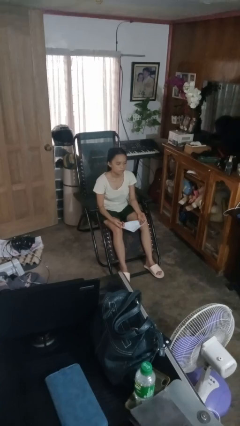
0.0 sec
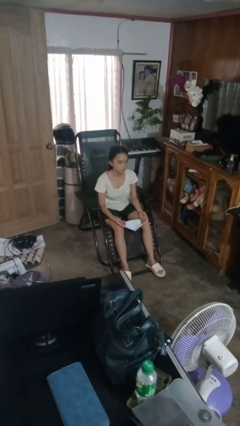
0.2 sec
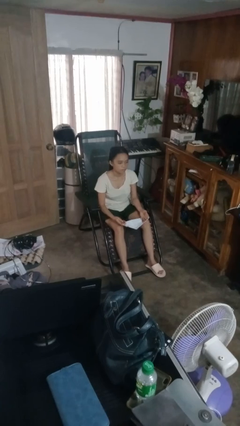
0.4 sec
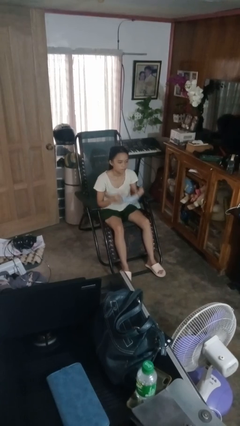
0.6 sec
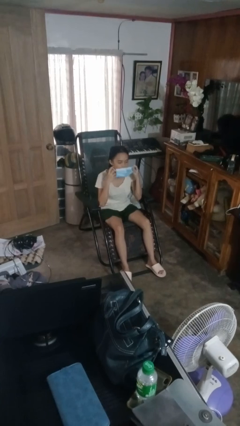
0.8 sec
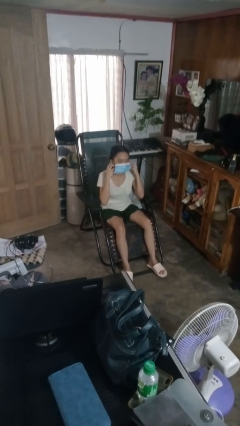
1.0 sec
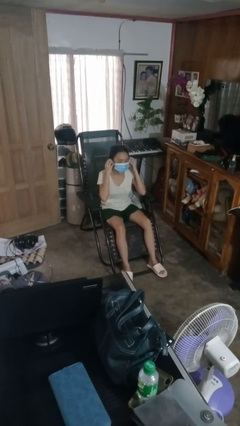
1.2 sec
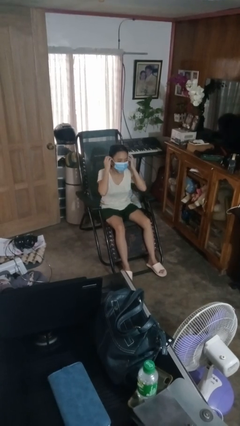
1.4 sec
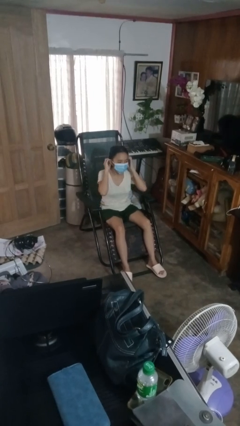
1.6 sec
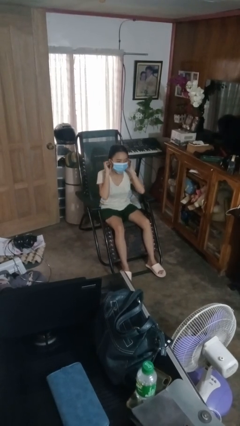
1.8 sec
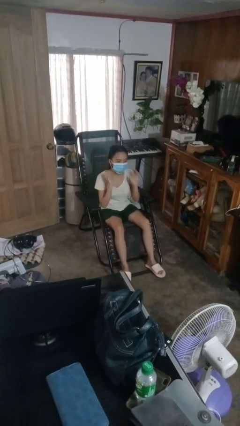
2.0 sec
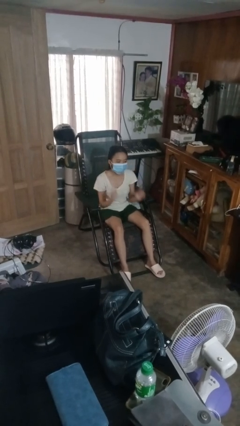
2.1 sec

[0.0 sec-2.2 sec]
person puts on facemask

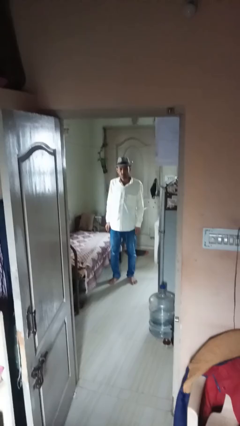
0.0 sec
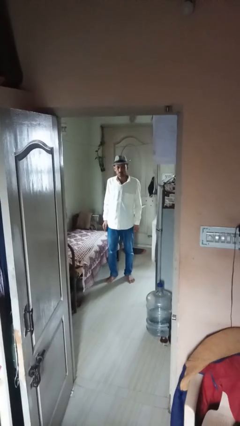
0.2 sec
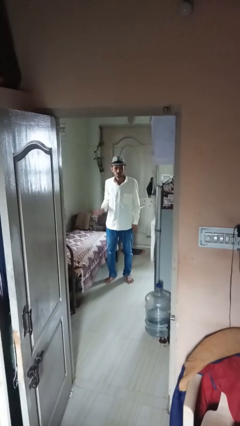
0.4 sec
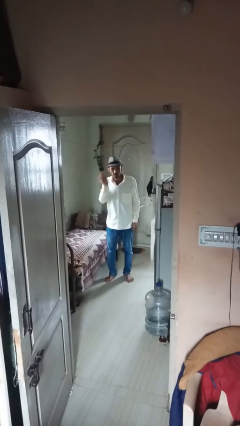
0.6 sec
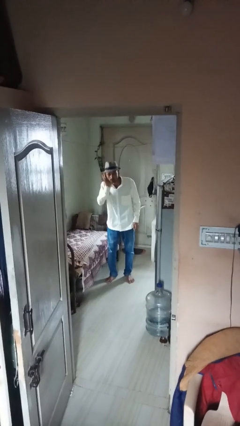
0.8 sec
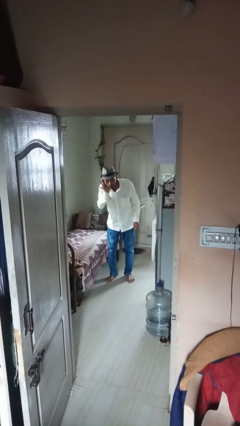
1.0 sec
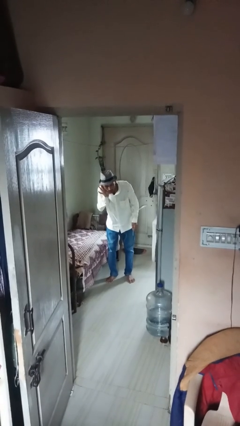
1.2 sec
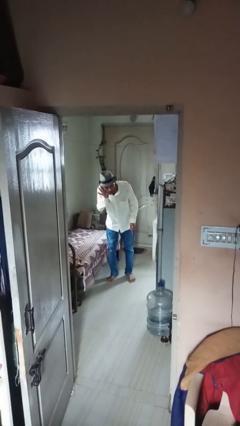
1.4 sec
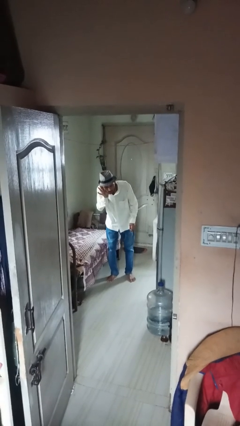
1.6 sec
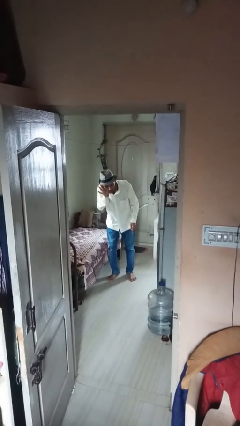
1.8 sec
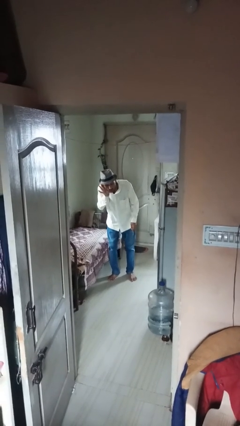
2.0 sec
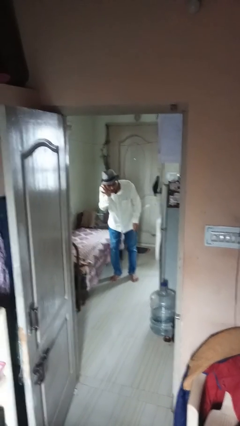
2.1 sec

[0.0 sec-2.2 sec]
person gestures listen closely

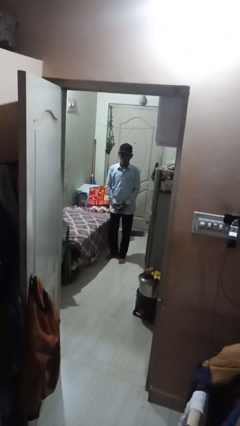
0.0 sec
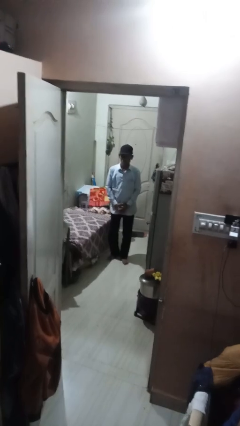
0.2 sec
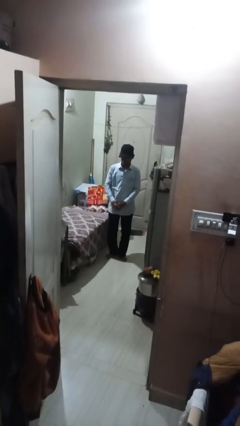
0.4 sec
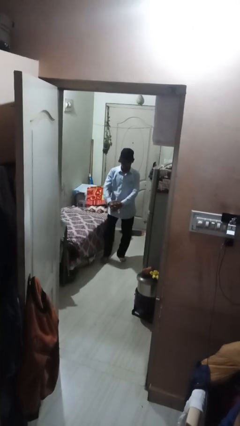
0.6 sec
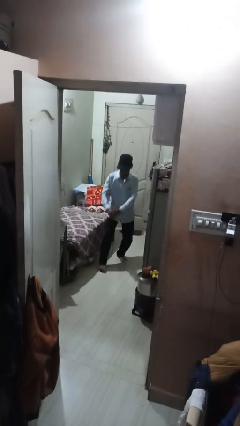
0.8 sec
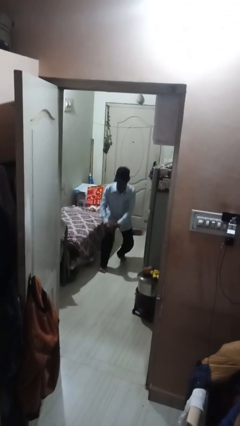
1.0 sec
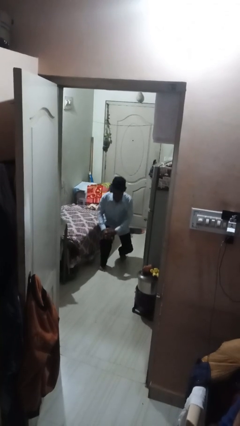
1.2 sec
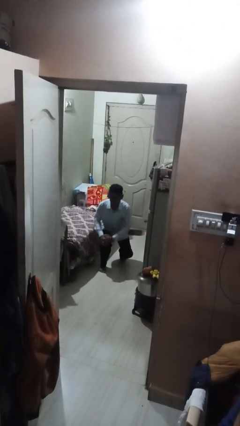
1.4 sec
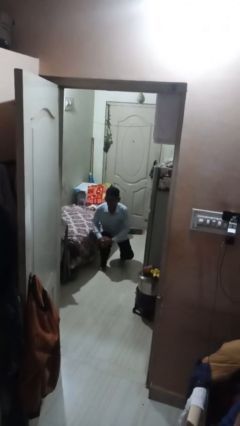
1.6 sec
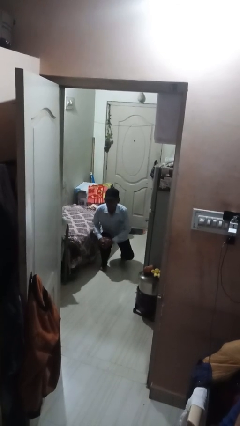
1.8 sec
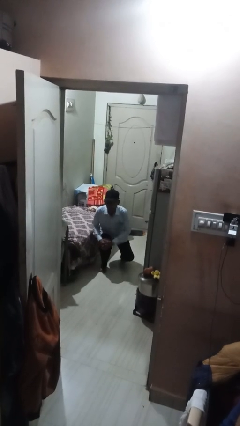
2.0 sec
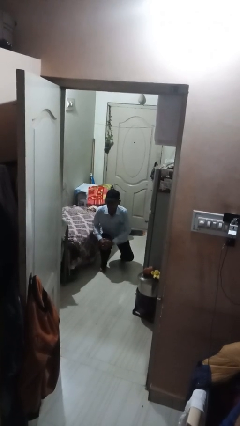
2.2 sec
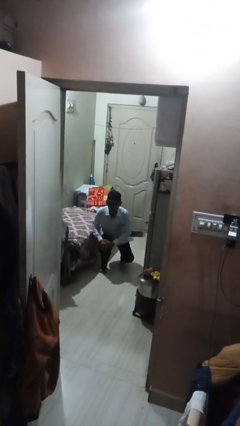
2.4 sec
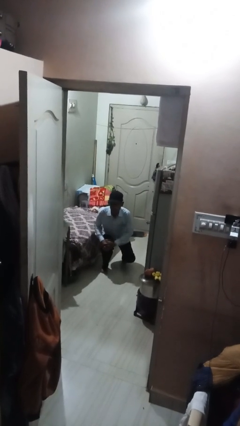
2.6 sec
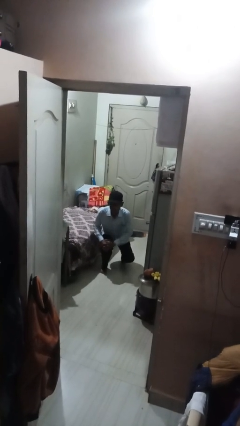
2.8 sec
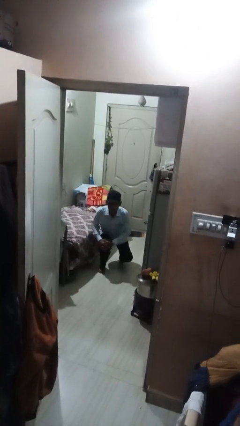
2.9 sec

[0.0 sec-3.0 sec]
person exercises with lunges

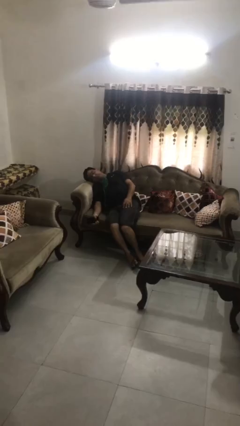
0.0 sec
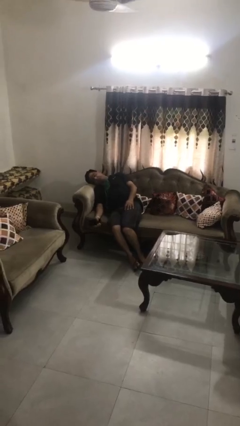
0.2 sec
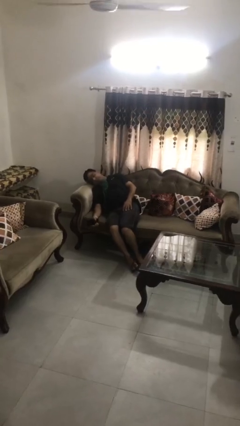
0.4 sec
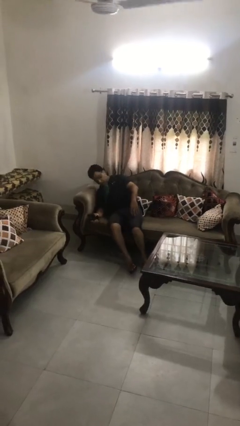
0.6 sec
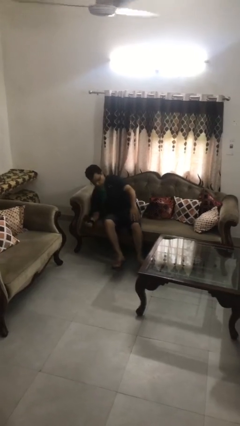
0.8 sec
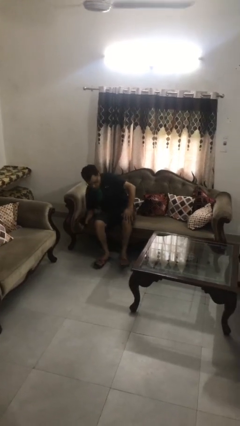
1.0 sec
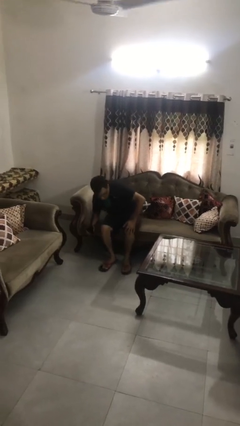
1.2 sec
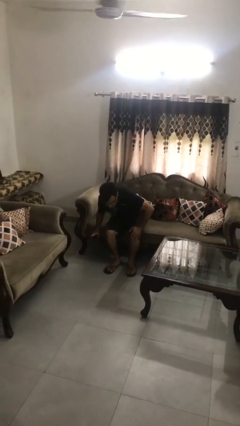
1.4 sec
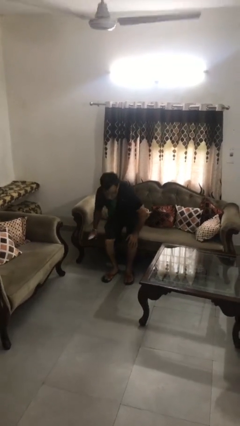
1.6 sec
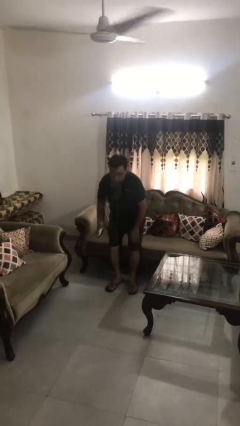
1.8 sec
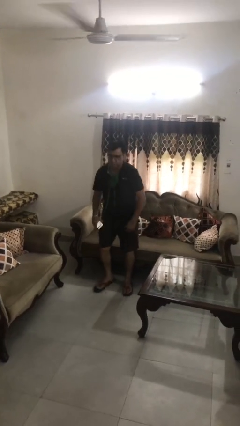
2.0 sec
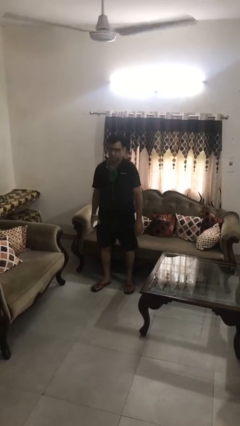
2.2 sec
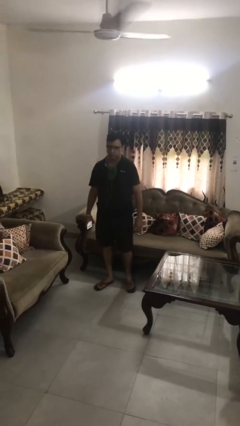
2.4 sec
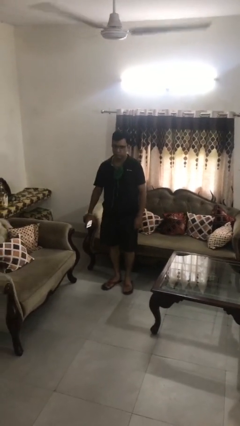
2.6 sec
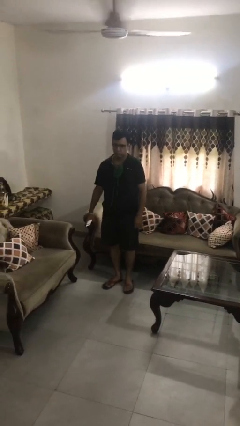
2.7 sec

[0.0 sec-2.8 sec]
person stands up

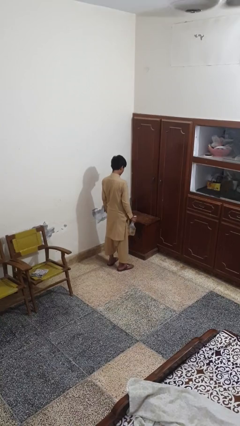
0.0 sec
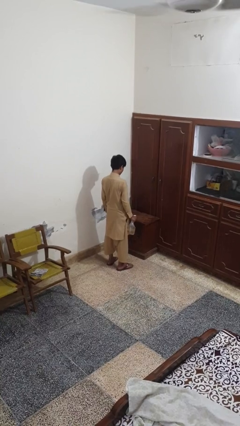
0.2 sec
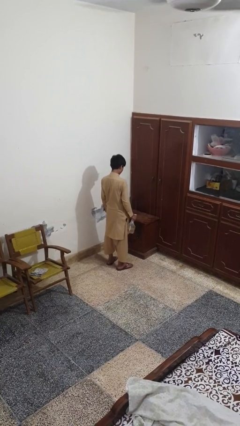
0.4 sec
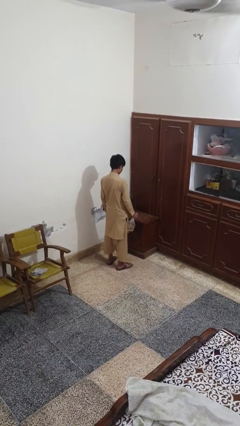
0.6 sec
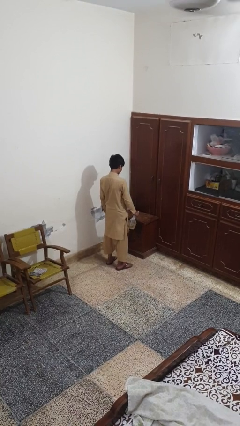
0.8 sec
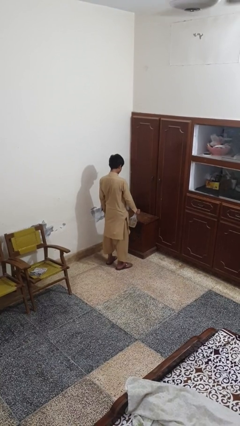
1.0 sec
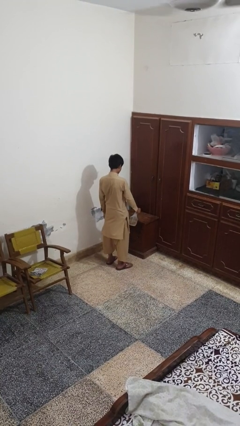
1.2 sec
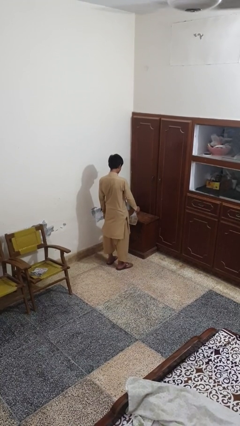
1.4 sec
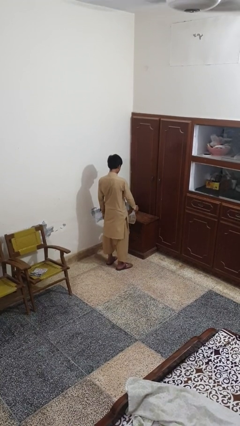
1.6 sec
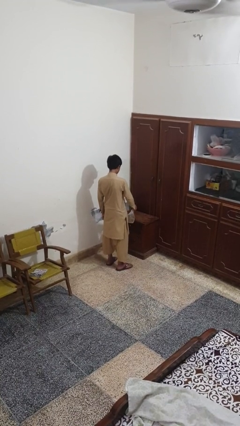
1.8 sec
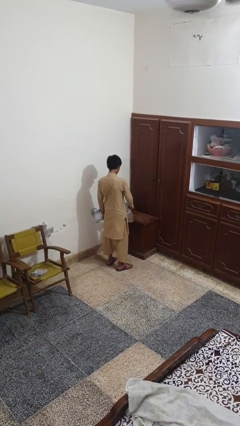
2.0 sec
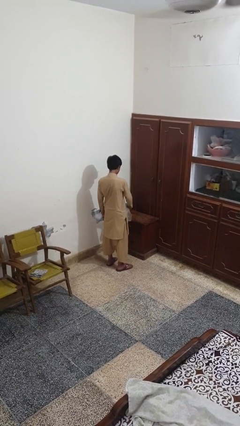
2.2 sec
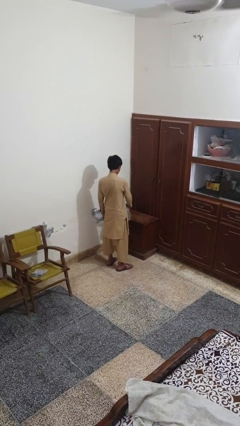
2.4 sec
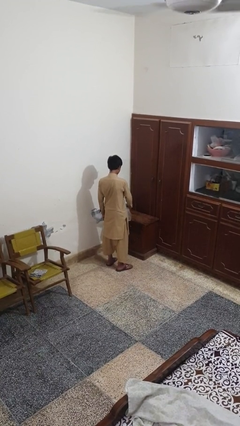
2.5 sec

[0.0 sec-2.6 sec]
person sprays from bottle

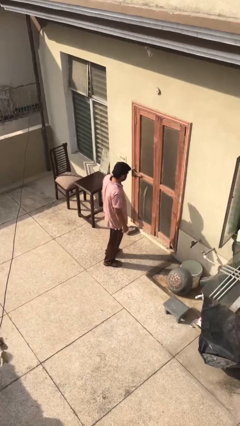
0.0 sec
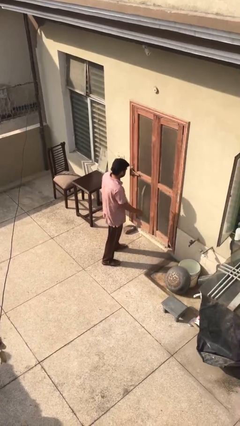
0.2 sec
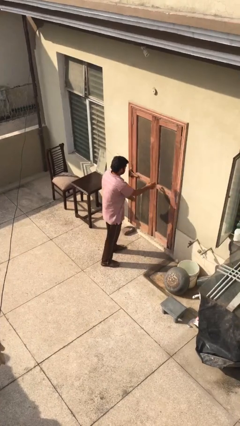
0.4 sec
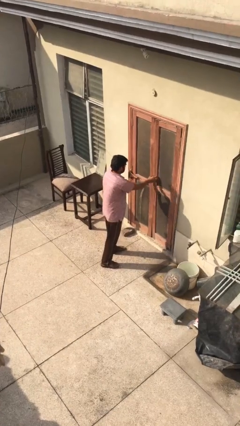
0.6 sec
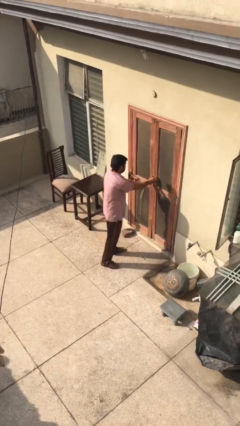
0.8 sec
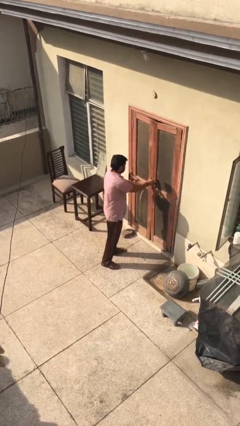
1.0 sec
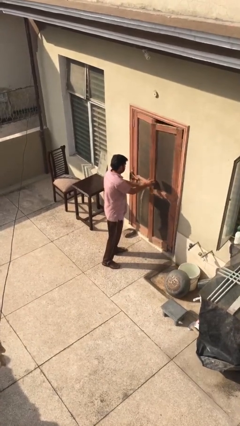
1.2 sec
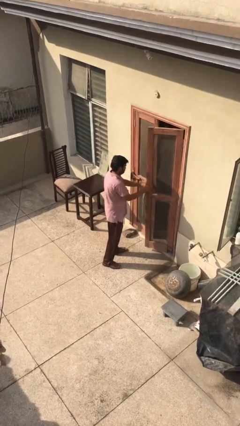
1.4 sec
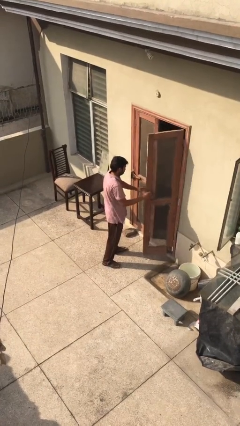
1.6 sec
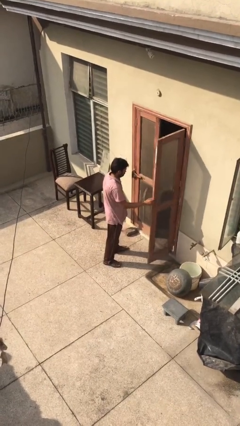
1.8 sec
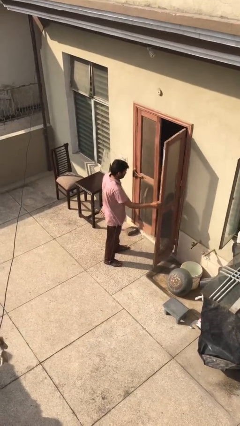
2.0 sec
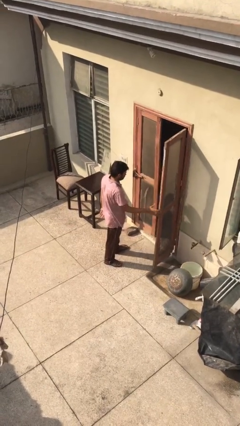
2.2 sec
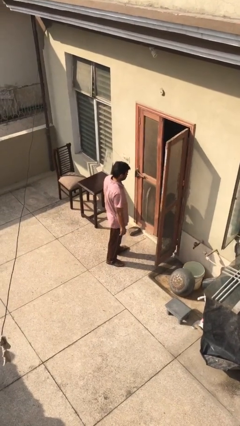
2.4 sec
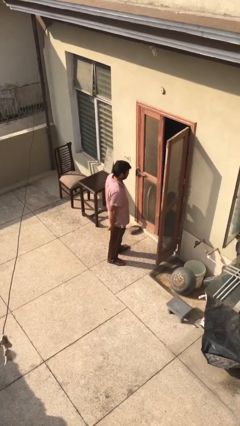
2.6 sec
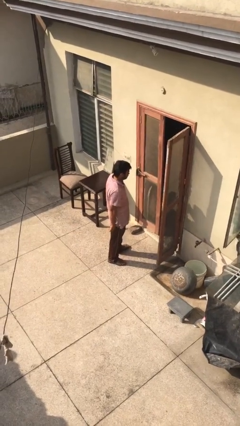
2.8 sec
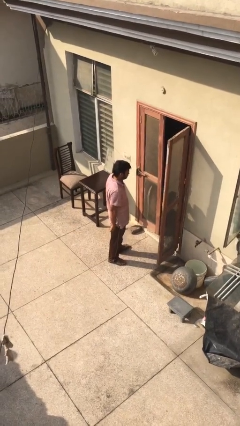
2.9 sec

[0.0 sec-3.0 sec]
person opens facility door

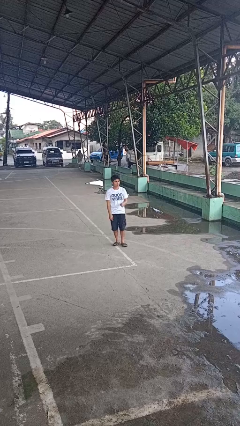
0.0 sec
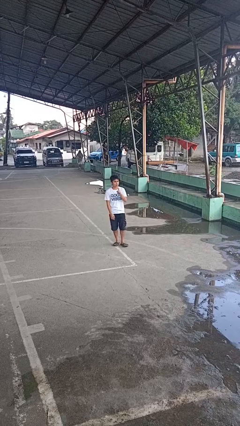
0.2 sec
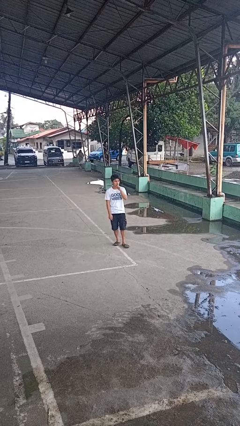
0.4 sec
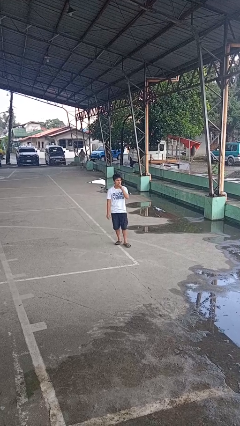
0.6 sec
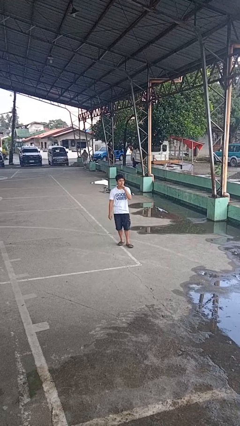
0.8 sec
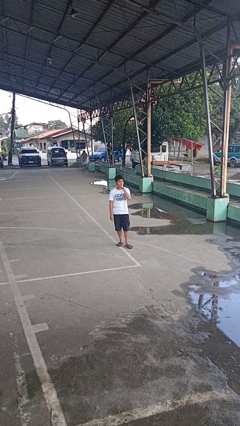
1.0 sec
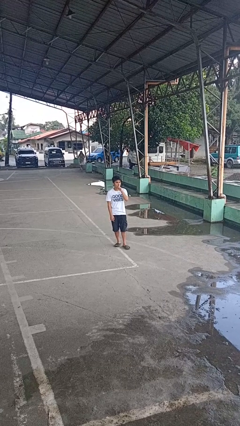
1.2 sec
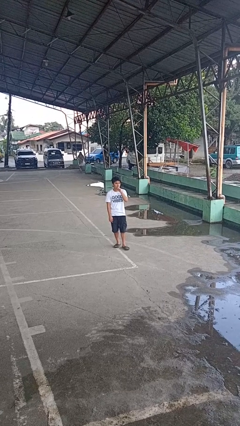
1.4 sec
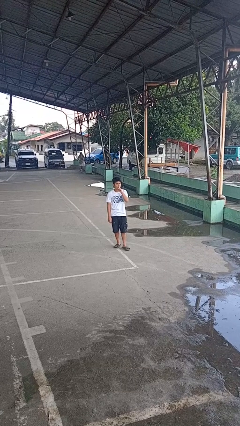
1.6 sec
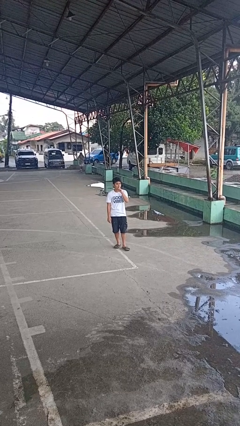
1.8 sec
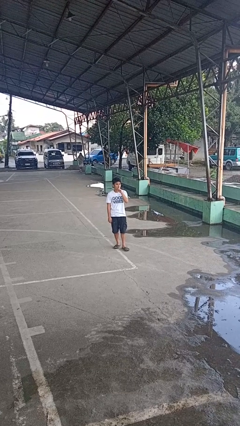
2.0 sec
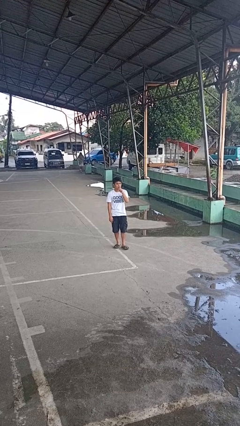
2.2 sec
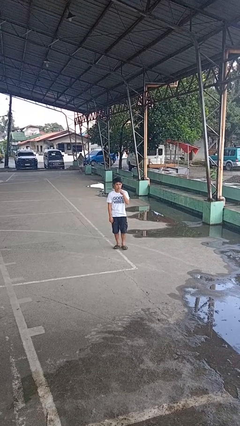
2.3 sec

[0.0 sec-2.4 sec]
person gestures be quiet
